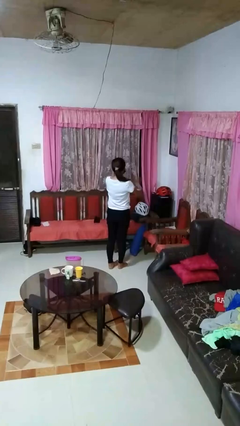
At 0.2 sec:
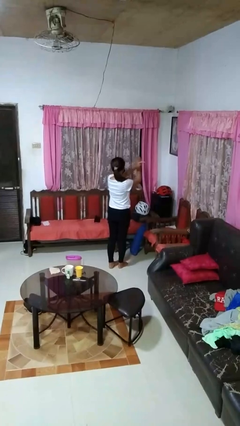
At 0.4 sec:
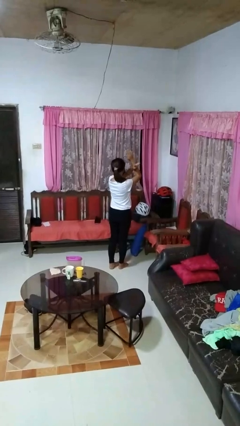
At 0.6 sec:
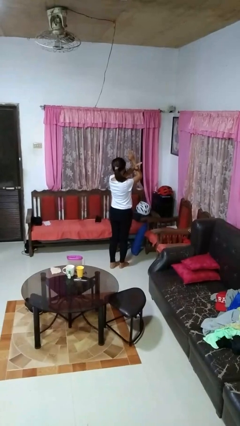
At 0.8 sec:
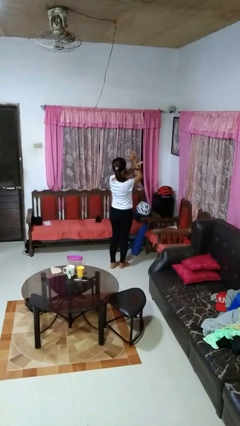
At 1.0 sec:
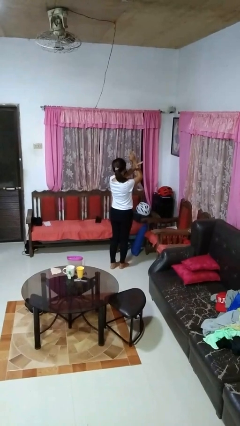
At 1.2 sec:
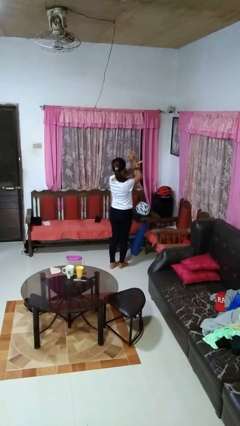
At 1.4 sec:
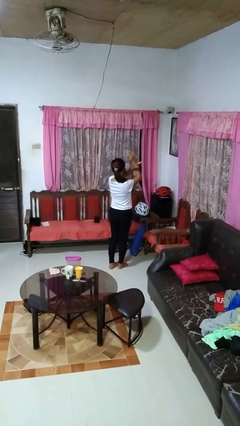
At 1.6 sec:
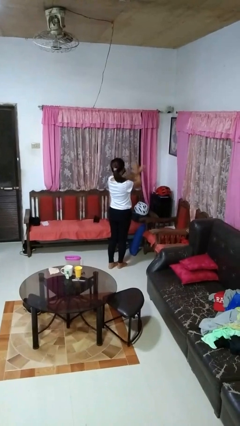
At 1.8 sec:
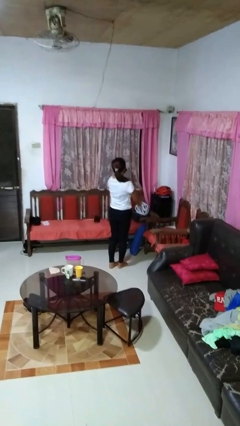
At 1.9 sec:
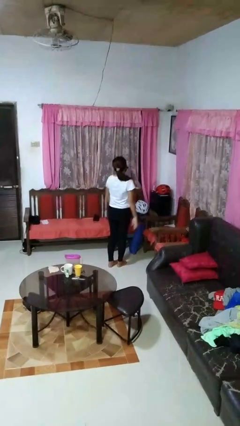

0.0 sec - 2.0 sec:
person gestures arms x

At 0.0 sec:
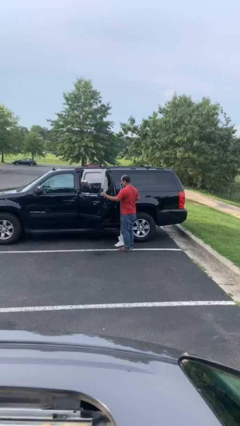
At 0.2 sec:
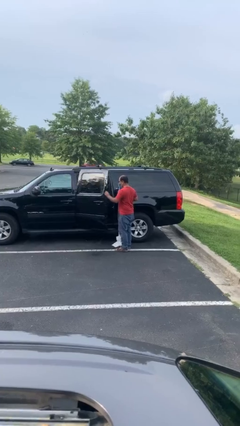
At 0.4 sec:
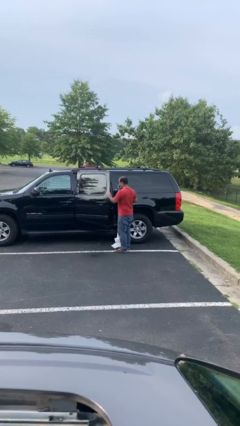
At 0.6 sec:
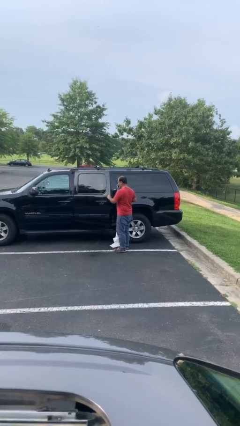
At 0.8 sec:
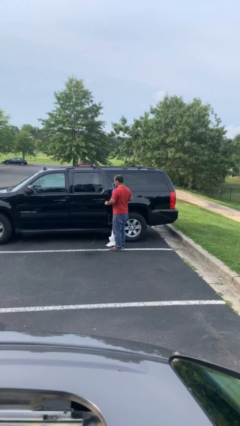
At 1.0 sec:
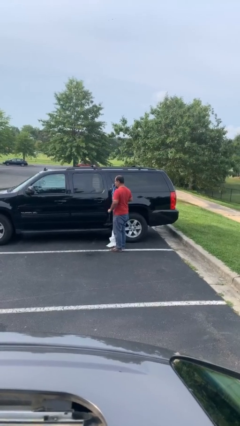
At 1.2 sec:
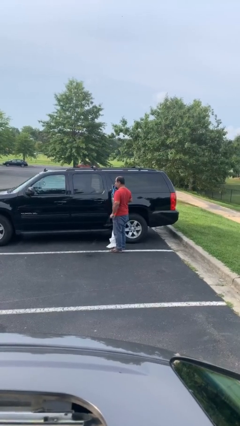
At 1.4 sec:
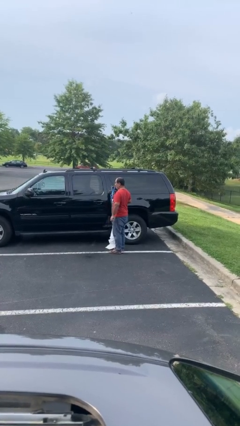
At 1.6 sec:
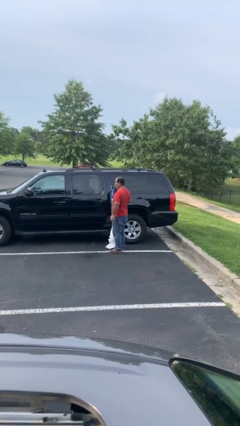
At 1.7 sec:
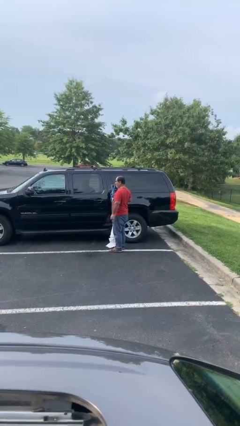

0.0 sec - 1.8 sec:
person closes car door

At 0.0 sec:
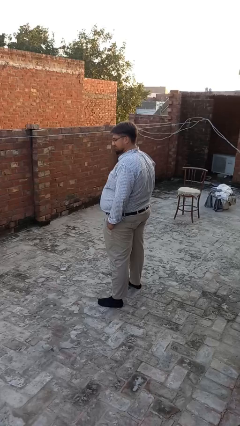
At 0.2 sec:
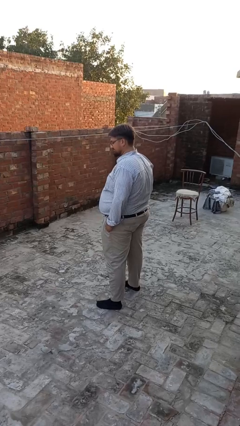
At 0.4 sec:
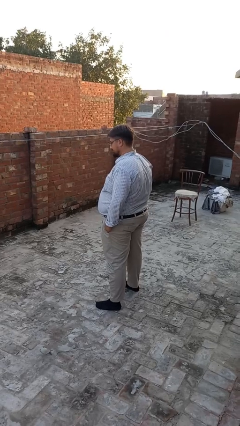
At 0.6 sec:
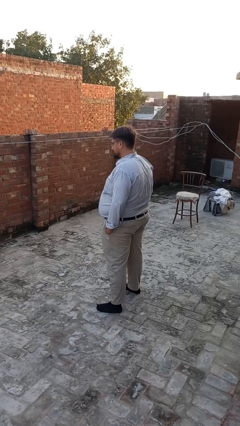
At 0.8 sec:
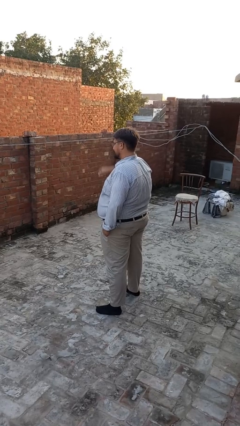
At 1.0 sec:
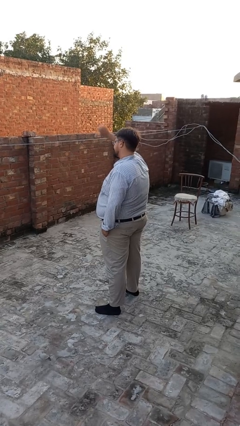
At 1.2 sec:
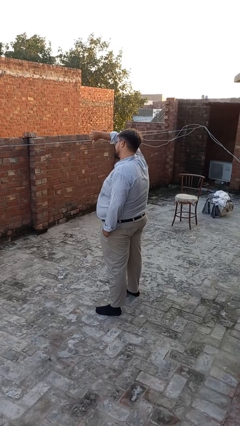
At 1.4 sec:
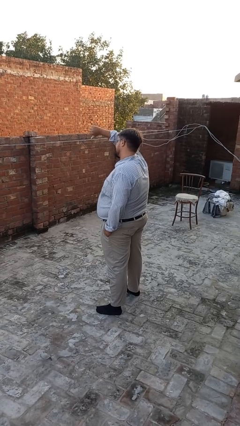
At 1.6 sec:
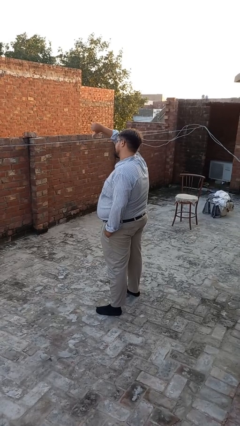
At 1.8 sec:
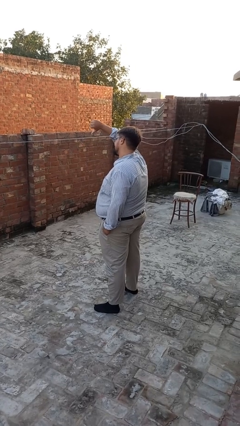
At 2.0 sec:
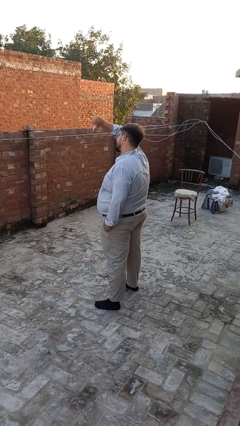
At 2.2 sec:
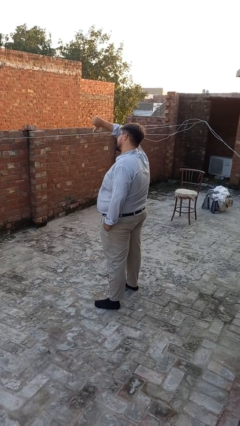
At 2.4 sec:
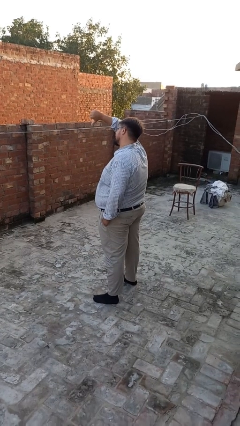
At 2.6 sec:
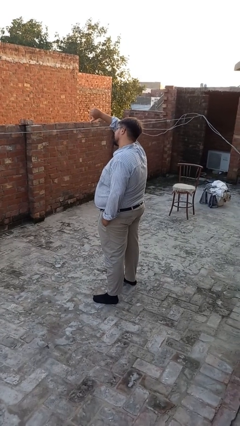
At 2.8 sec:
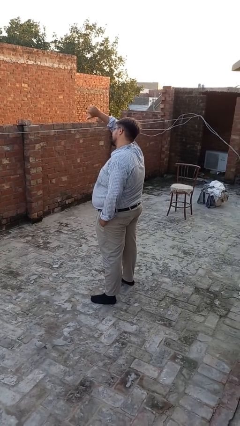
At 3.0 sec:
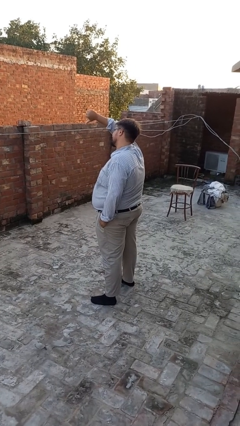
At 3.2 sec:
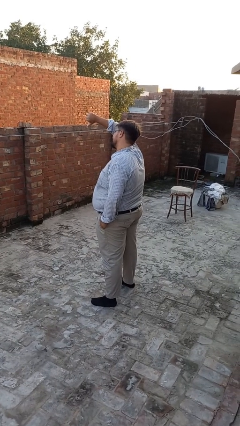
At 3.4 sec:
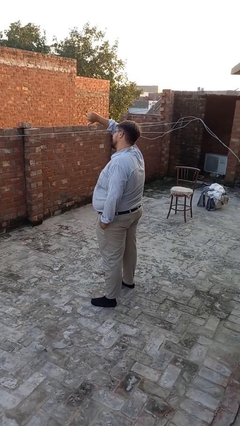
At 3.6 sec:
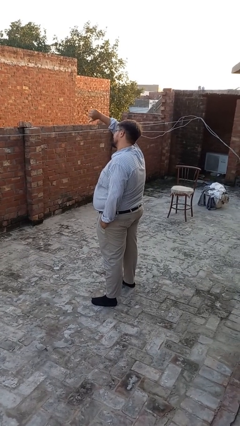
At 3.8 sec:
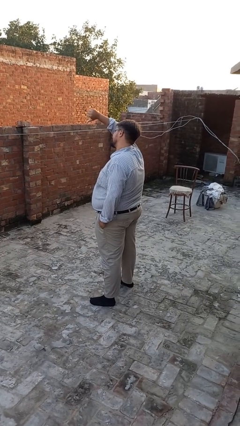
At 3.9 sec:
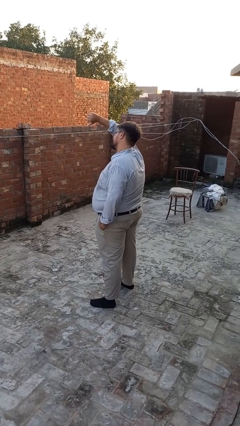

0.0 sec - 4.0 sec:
person gestures thumbs down

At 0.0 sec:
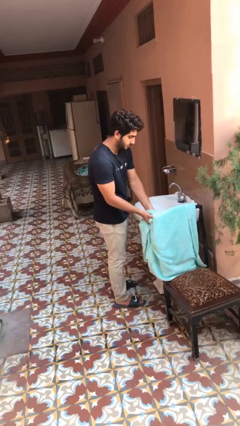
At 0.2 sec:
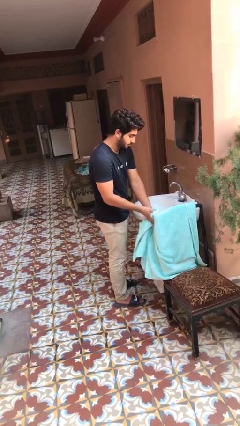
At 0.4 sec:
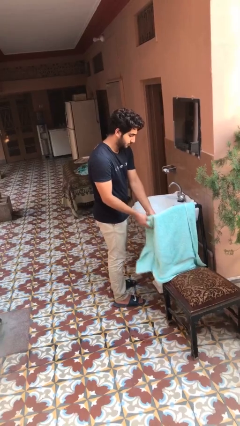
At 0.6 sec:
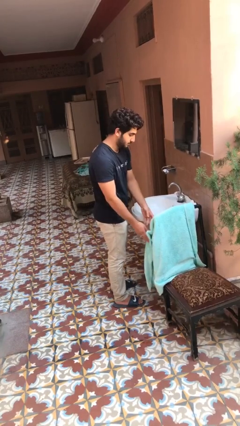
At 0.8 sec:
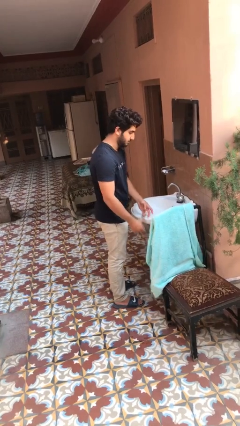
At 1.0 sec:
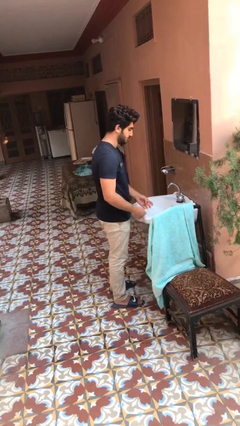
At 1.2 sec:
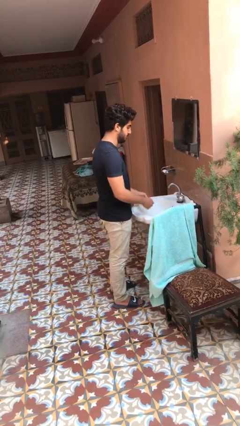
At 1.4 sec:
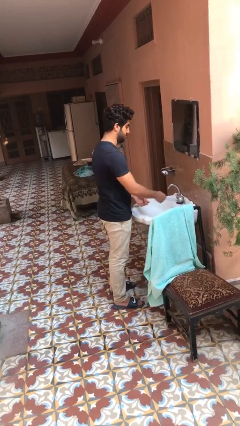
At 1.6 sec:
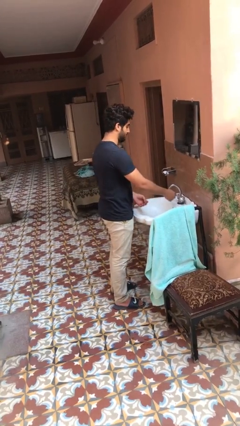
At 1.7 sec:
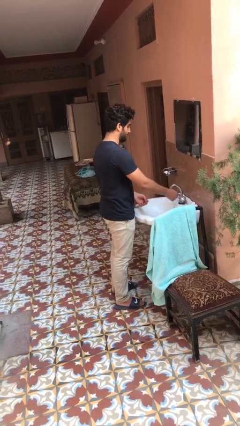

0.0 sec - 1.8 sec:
person dries hands with towel

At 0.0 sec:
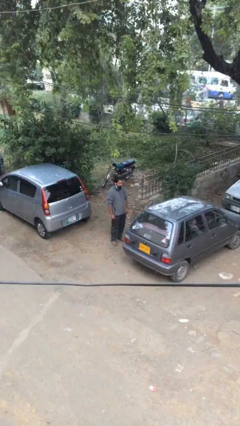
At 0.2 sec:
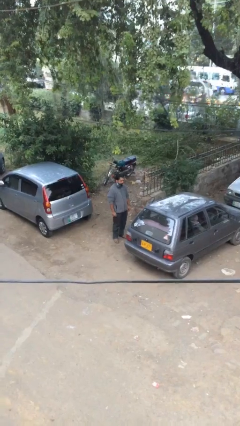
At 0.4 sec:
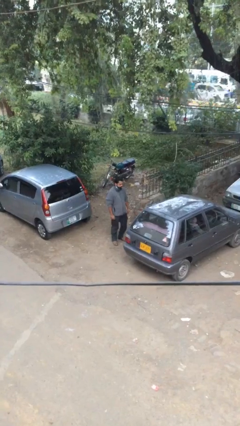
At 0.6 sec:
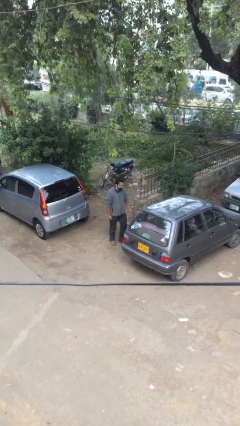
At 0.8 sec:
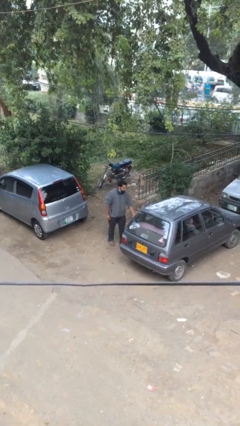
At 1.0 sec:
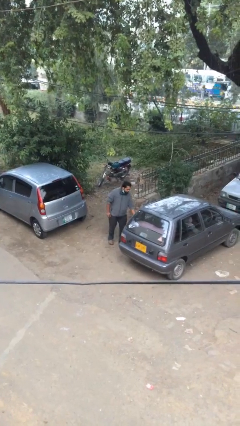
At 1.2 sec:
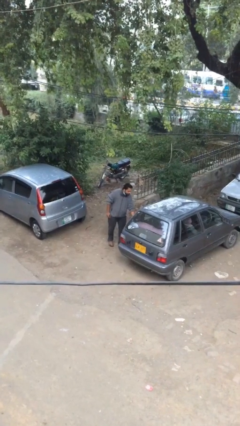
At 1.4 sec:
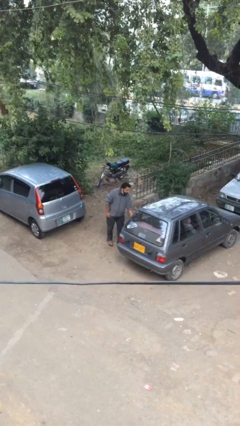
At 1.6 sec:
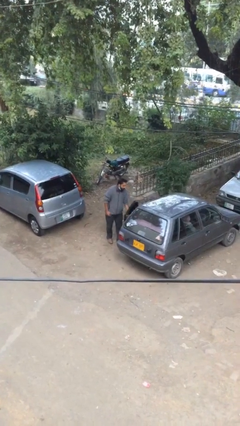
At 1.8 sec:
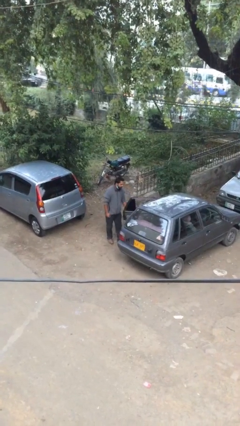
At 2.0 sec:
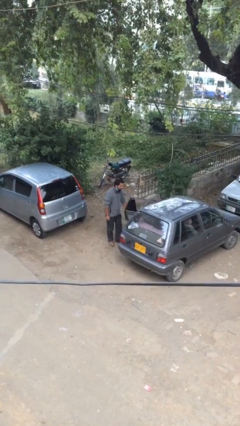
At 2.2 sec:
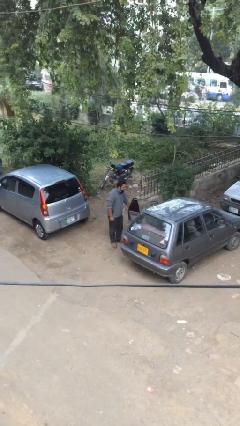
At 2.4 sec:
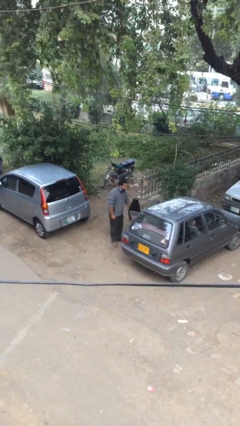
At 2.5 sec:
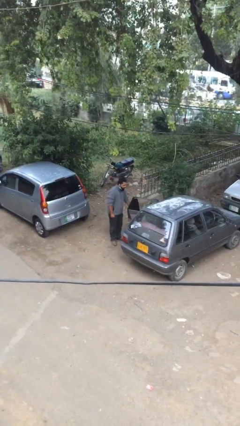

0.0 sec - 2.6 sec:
person opens car door

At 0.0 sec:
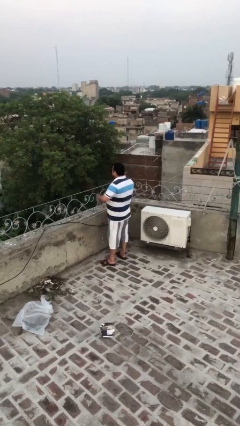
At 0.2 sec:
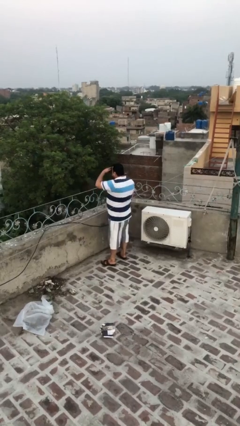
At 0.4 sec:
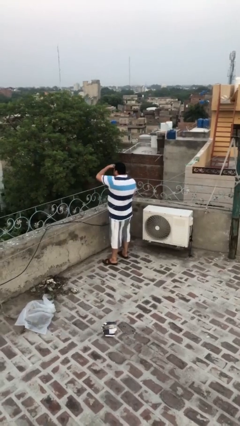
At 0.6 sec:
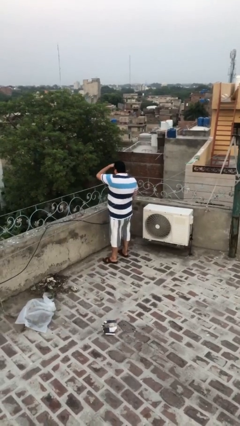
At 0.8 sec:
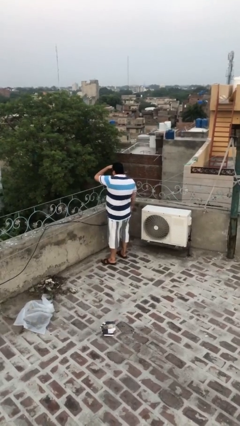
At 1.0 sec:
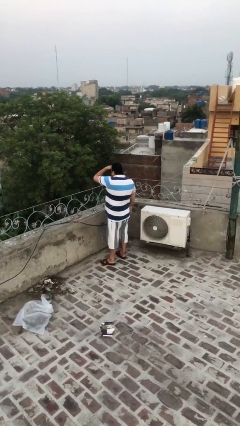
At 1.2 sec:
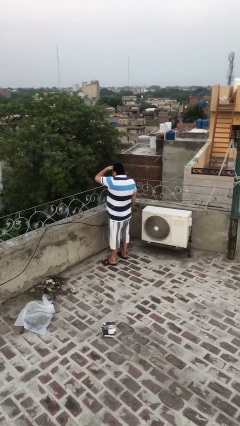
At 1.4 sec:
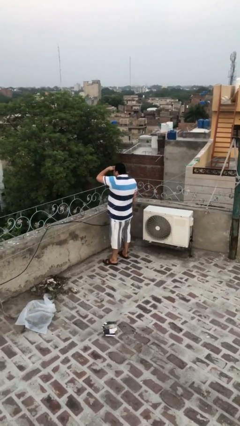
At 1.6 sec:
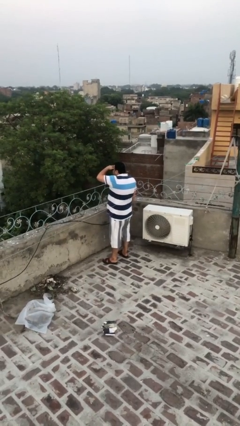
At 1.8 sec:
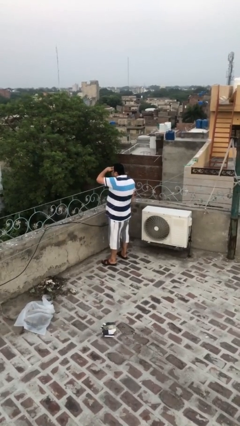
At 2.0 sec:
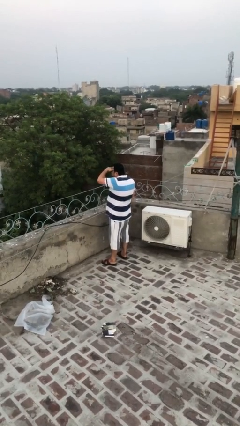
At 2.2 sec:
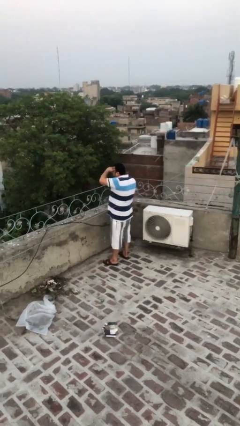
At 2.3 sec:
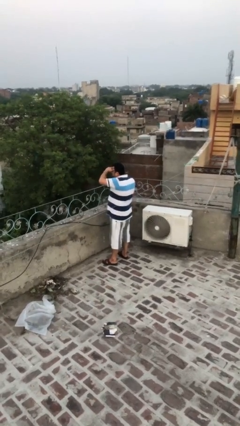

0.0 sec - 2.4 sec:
person shades eyes

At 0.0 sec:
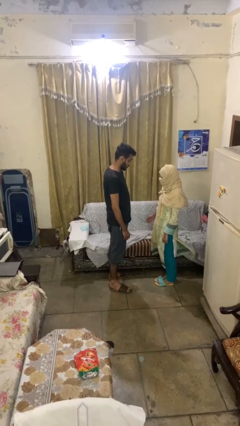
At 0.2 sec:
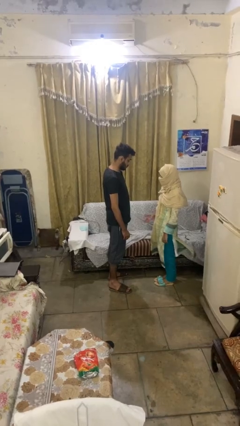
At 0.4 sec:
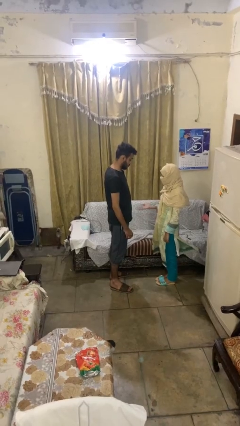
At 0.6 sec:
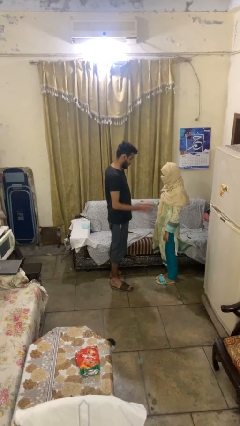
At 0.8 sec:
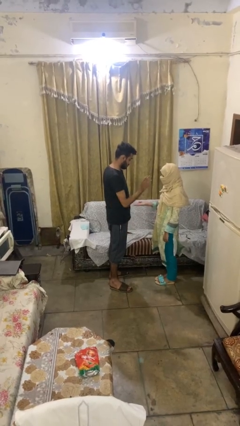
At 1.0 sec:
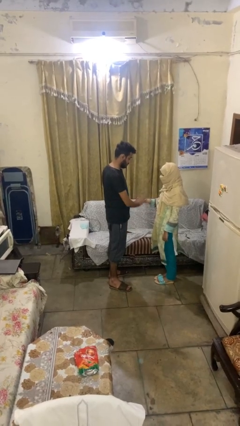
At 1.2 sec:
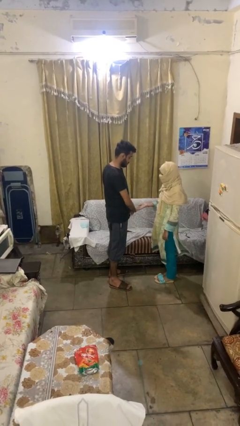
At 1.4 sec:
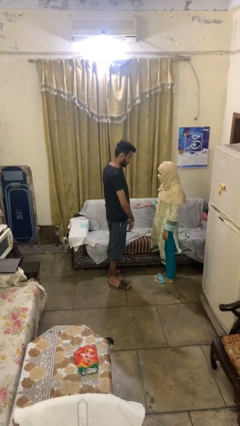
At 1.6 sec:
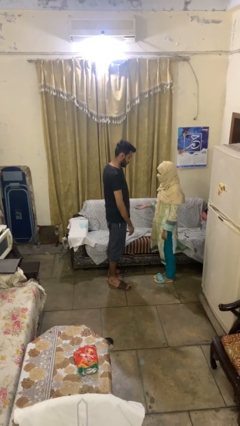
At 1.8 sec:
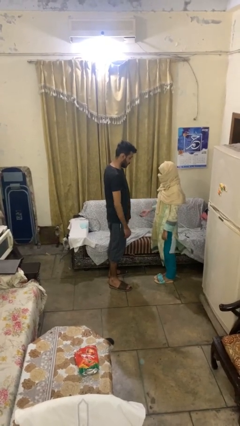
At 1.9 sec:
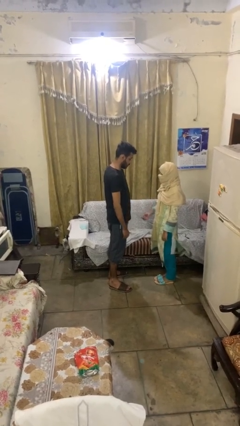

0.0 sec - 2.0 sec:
person highfives hand
